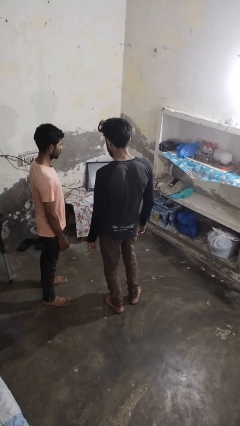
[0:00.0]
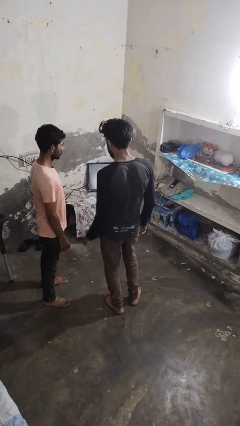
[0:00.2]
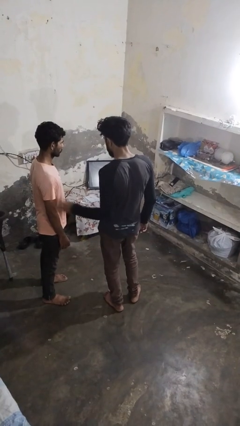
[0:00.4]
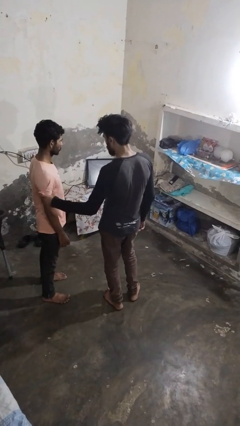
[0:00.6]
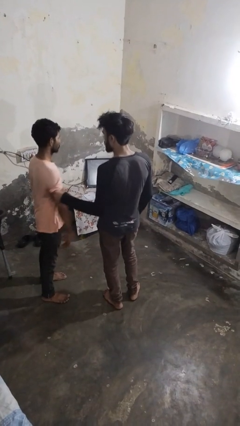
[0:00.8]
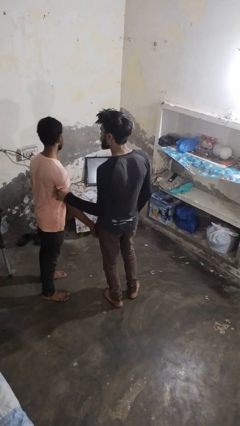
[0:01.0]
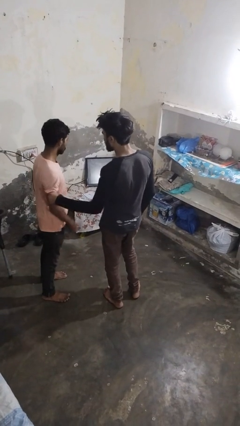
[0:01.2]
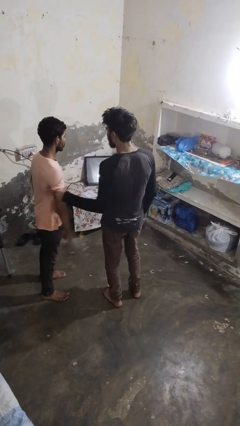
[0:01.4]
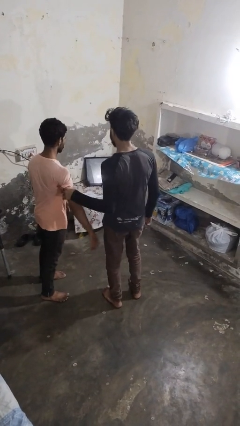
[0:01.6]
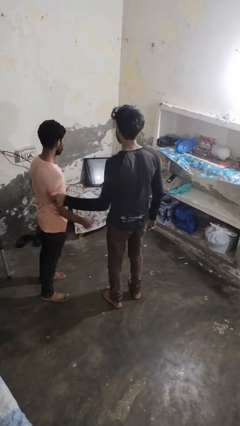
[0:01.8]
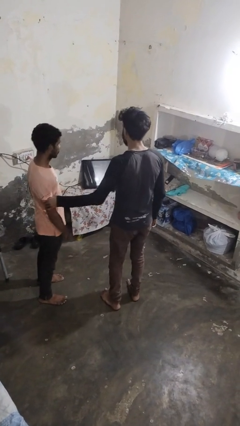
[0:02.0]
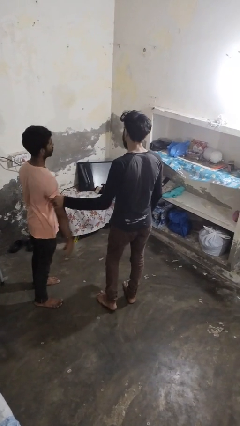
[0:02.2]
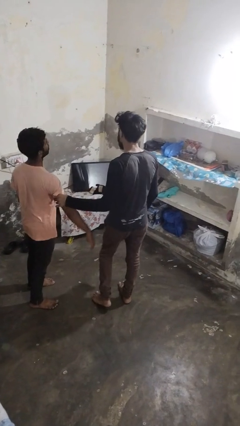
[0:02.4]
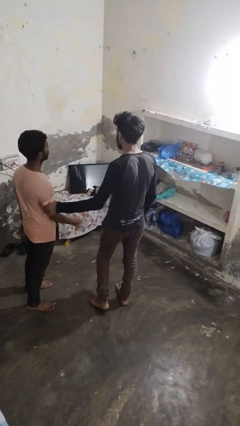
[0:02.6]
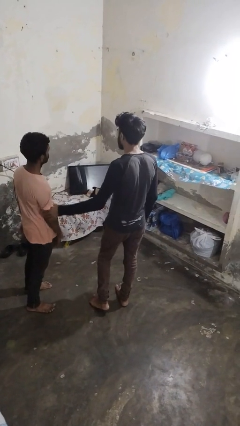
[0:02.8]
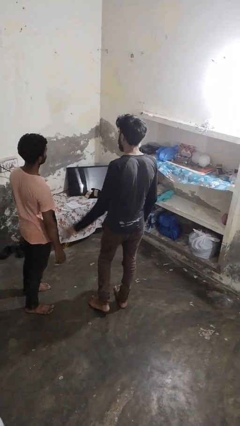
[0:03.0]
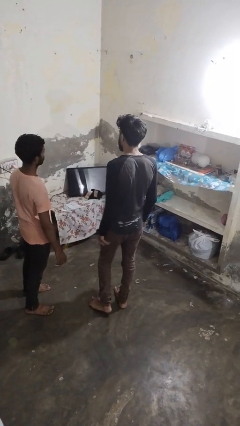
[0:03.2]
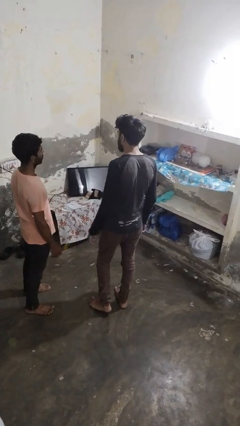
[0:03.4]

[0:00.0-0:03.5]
person grabs person by bicep

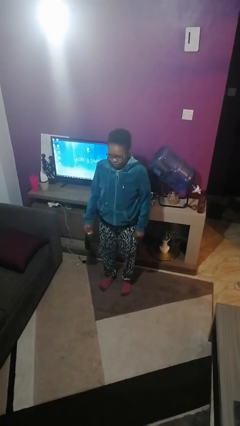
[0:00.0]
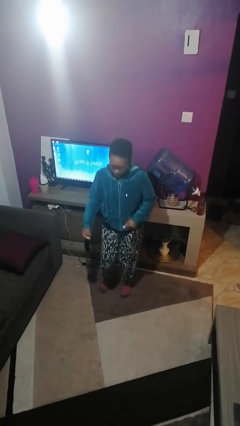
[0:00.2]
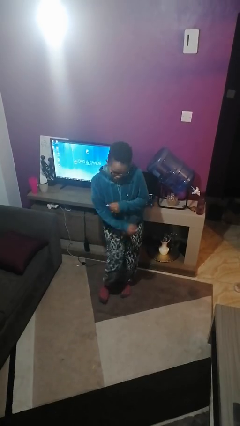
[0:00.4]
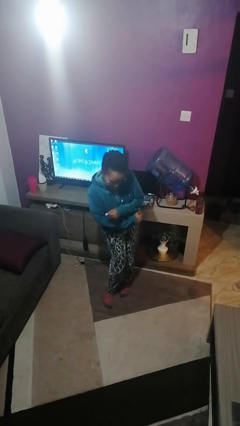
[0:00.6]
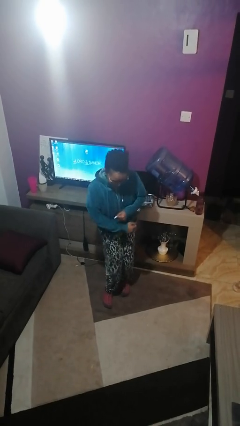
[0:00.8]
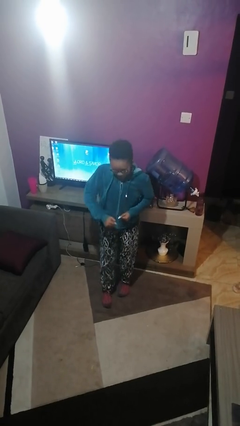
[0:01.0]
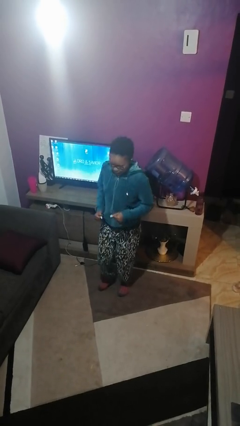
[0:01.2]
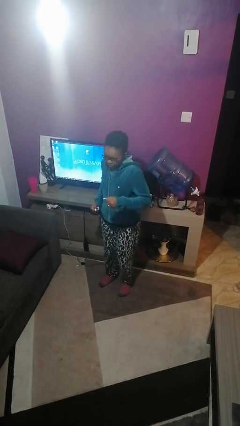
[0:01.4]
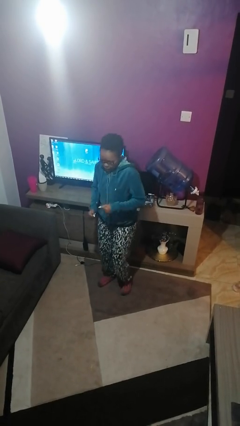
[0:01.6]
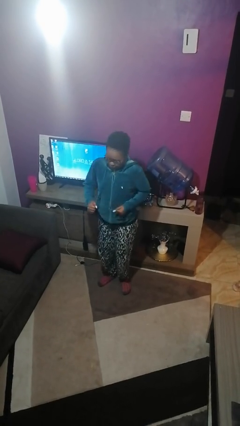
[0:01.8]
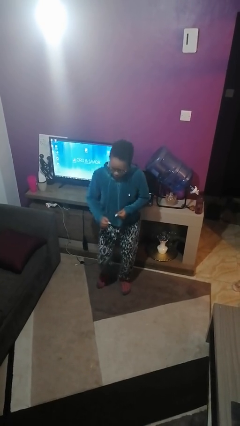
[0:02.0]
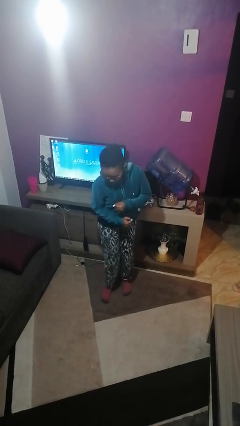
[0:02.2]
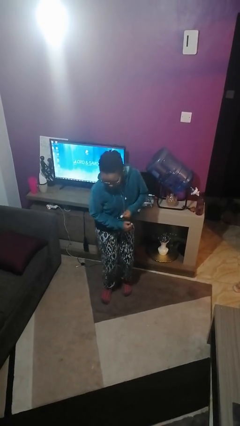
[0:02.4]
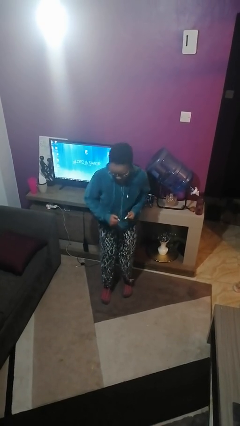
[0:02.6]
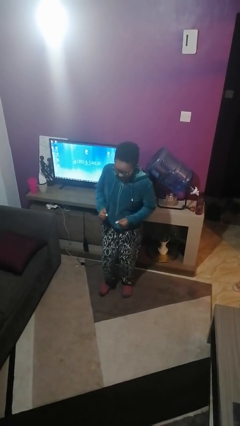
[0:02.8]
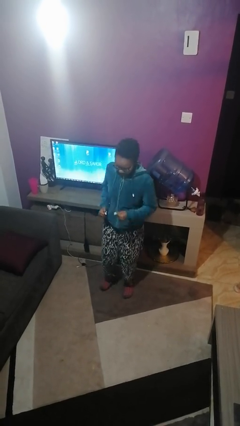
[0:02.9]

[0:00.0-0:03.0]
person dances in place

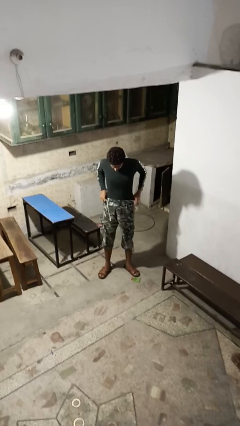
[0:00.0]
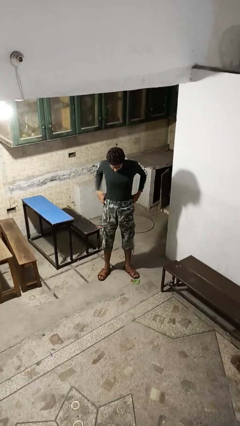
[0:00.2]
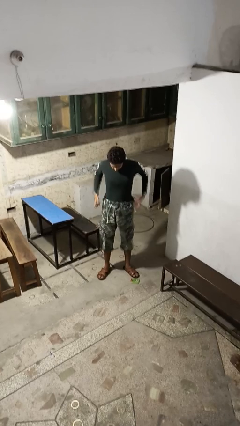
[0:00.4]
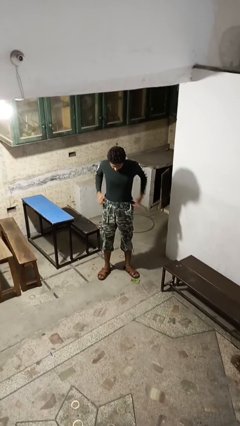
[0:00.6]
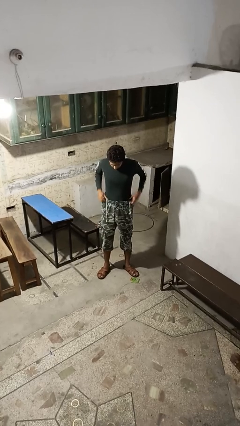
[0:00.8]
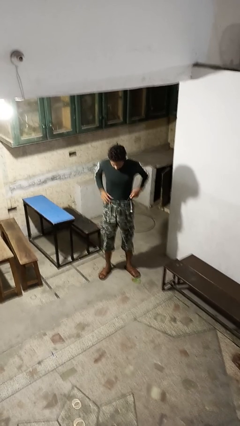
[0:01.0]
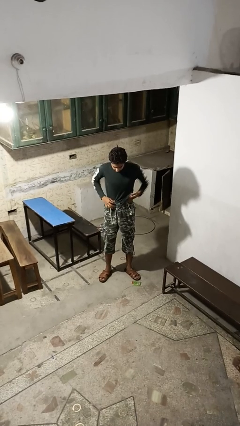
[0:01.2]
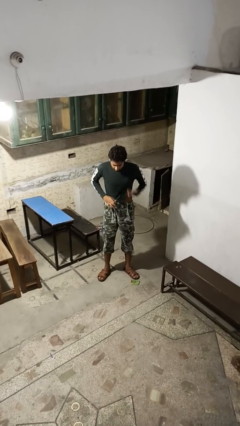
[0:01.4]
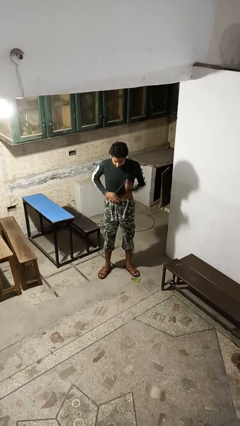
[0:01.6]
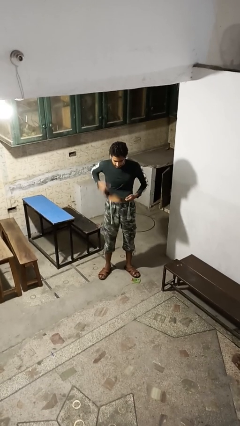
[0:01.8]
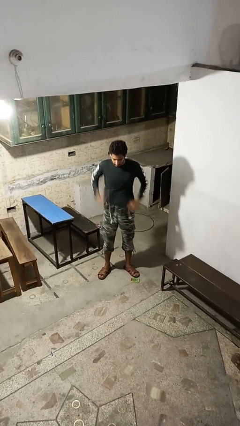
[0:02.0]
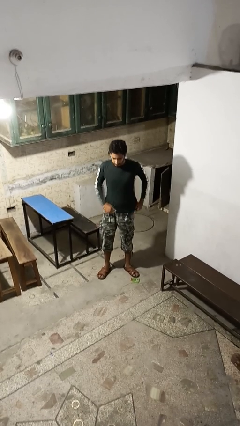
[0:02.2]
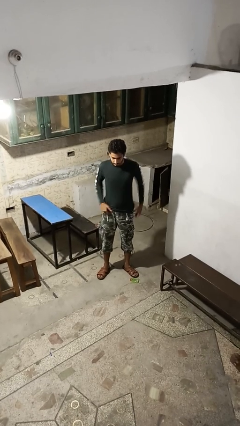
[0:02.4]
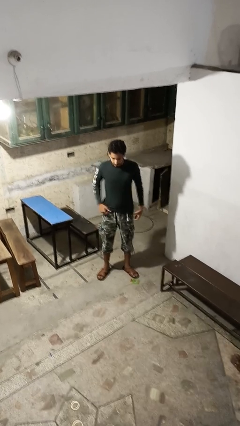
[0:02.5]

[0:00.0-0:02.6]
person untucks shirt

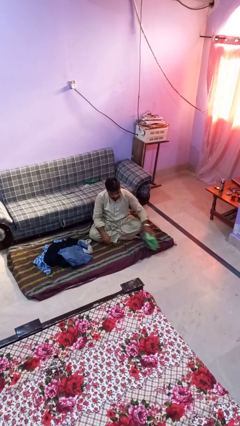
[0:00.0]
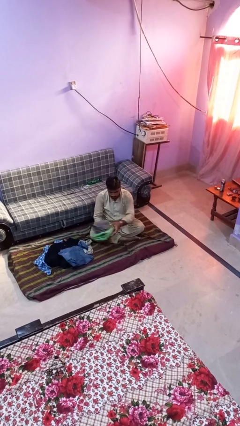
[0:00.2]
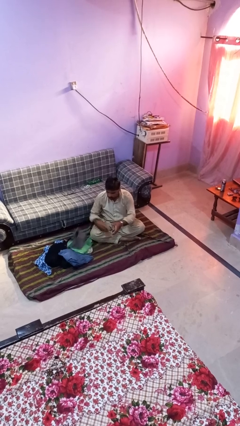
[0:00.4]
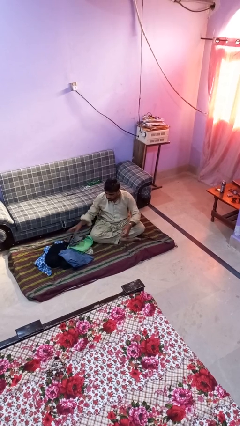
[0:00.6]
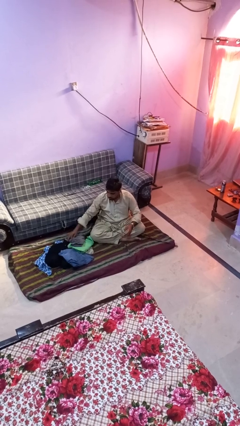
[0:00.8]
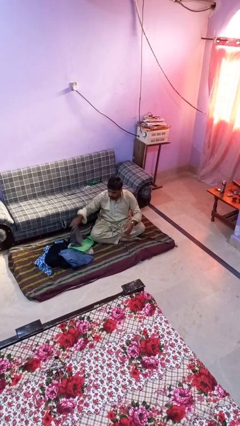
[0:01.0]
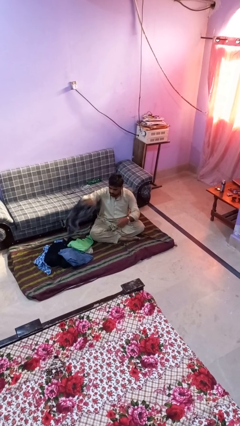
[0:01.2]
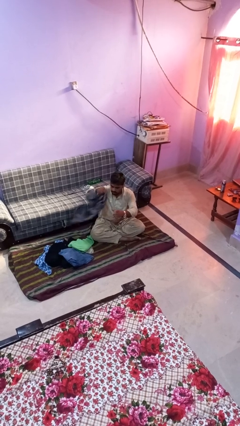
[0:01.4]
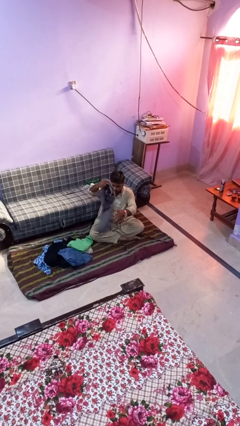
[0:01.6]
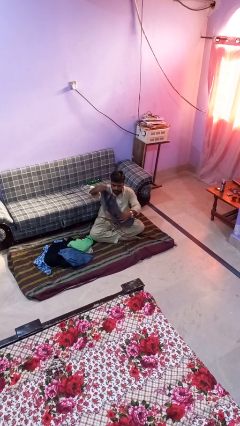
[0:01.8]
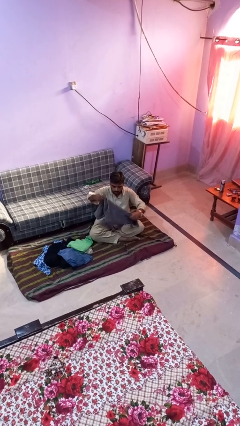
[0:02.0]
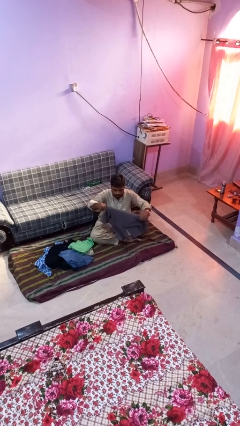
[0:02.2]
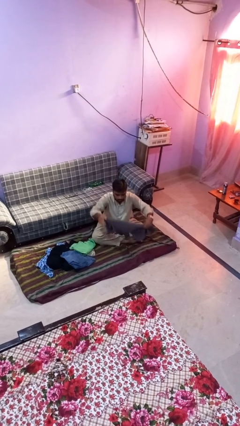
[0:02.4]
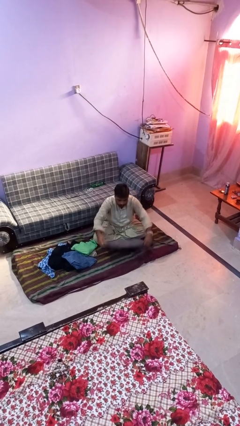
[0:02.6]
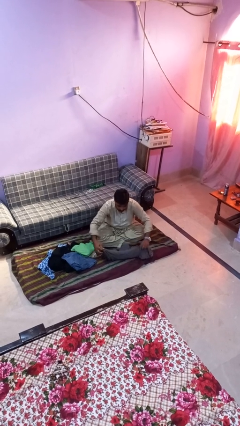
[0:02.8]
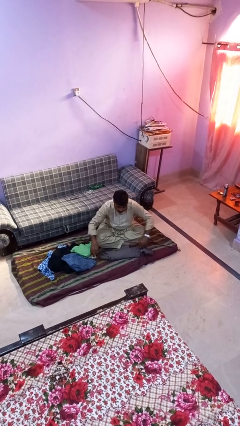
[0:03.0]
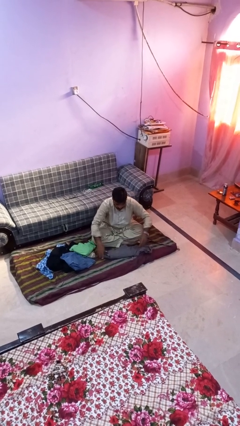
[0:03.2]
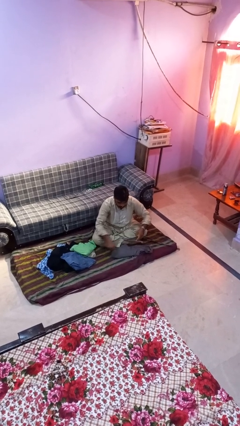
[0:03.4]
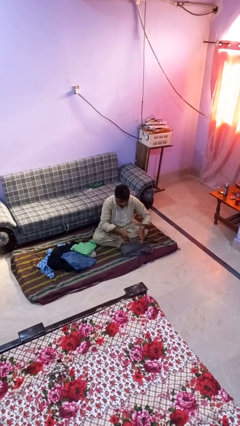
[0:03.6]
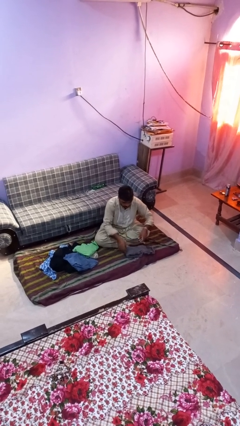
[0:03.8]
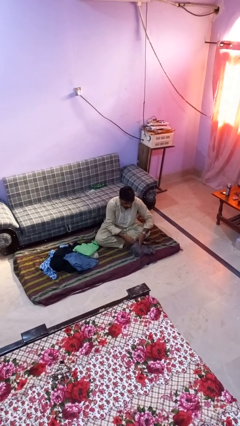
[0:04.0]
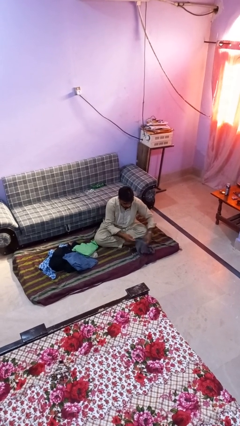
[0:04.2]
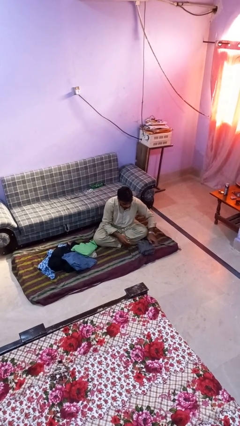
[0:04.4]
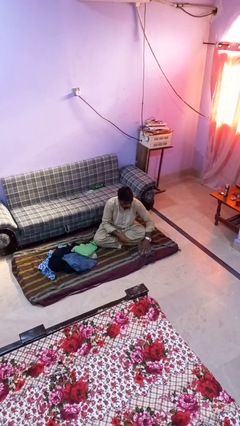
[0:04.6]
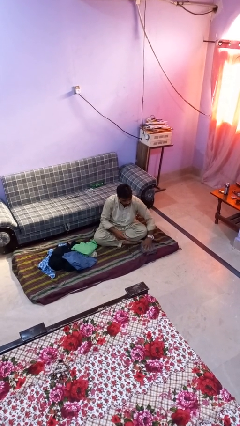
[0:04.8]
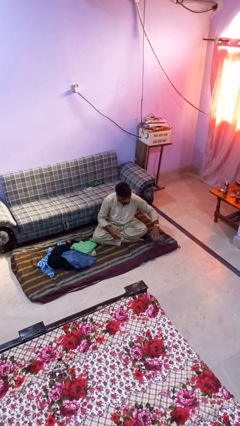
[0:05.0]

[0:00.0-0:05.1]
person folds shirt

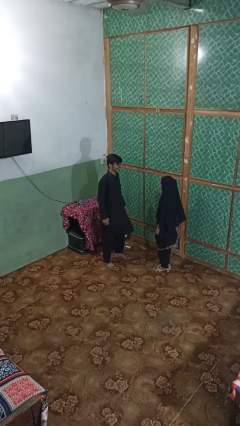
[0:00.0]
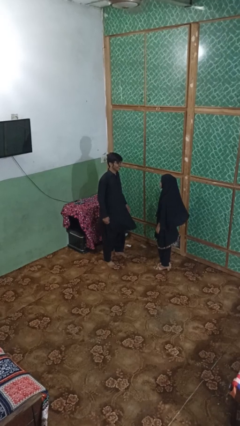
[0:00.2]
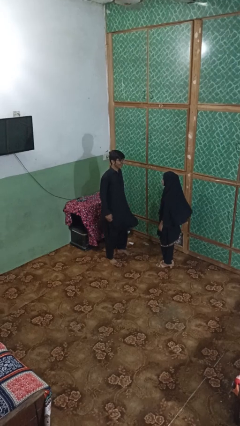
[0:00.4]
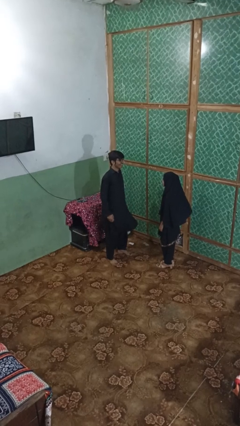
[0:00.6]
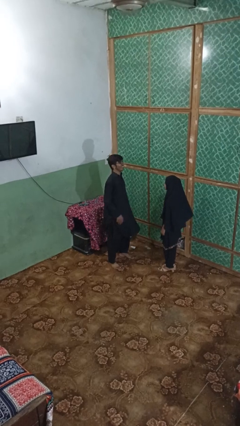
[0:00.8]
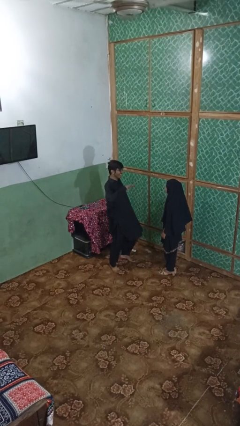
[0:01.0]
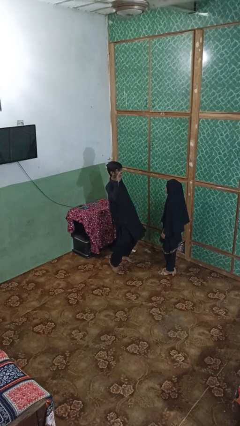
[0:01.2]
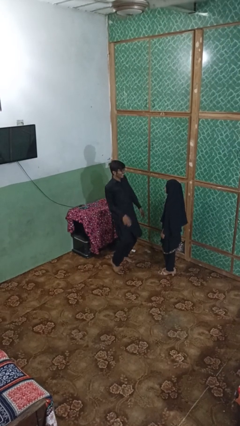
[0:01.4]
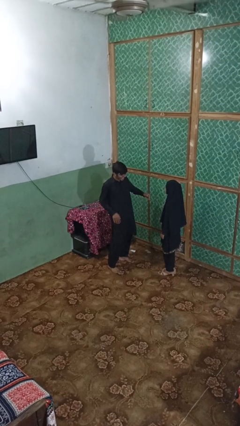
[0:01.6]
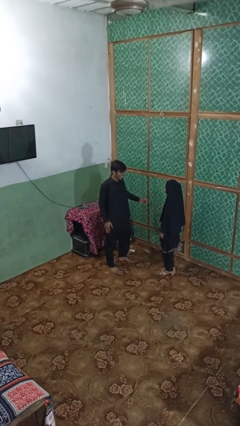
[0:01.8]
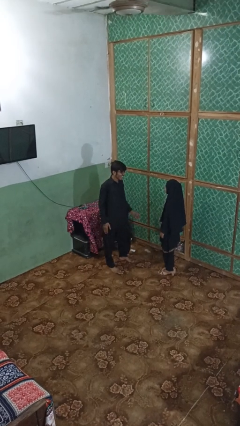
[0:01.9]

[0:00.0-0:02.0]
person laughs with person

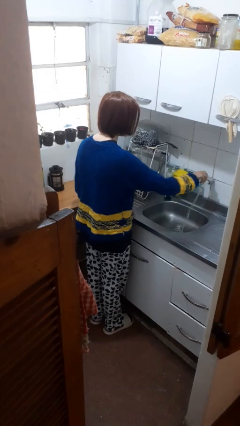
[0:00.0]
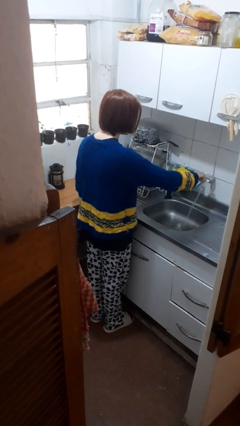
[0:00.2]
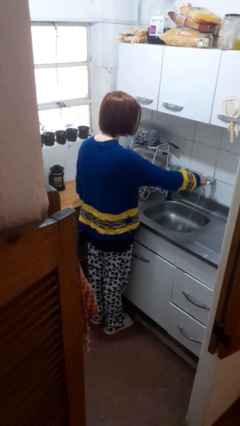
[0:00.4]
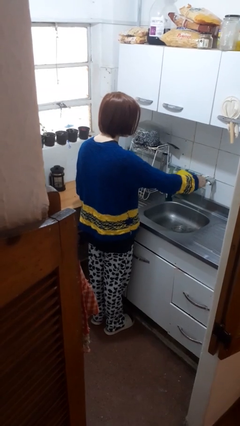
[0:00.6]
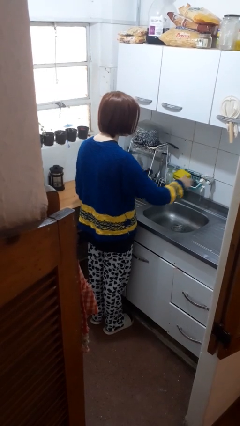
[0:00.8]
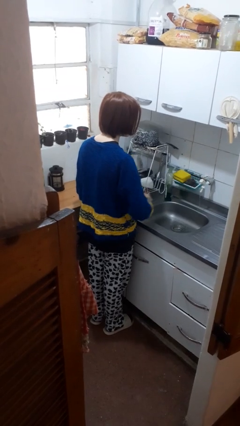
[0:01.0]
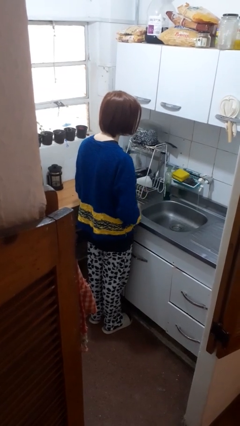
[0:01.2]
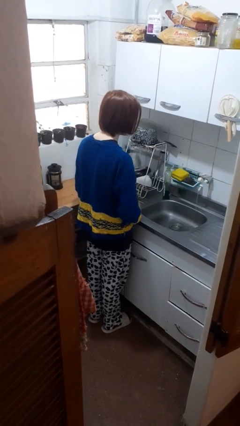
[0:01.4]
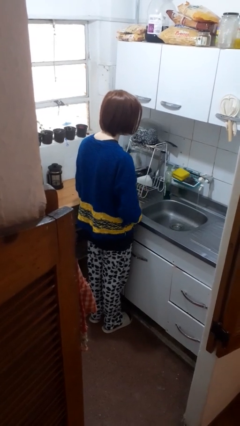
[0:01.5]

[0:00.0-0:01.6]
person turns off faucet
